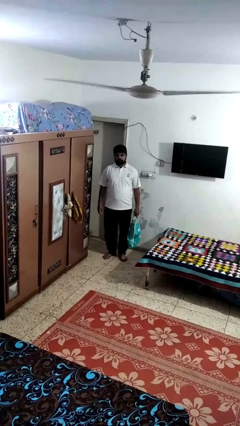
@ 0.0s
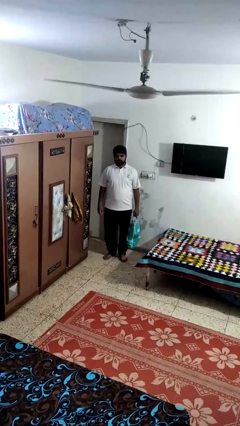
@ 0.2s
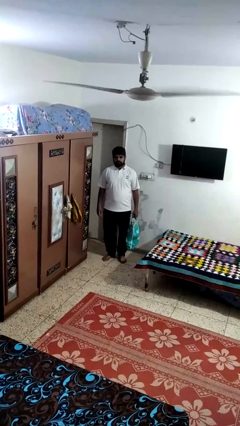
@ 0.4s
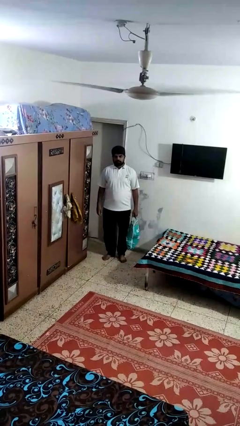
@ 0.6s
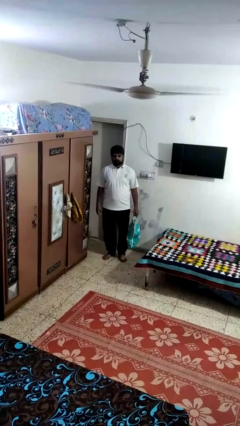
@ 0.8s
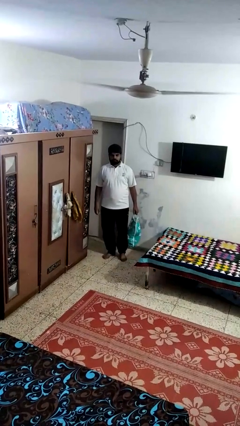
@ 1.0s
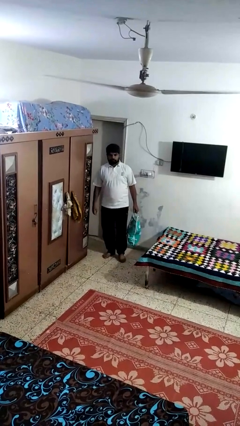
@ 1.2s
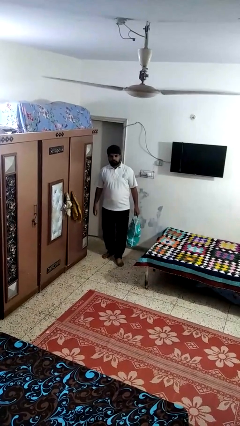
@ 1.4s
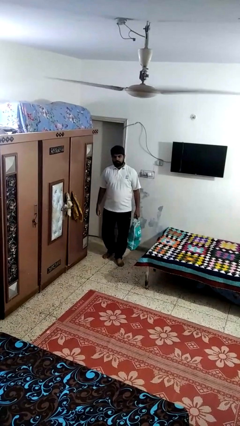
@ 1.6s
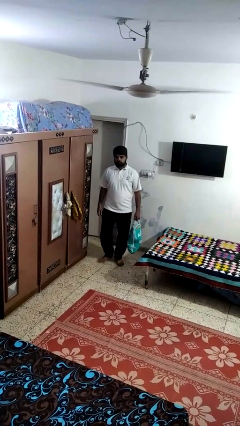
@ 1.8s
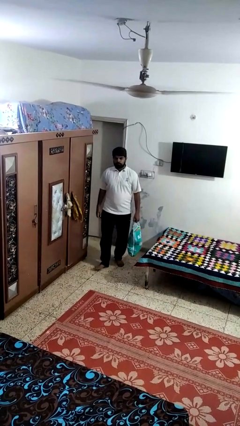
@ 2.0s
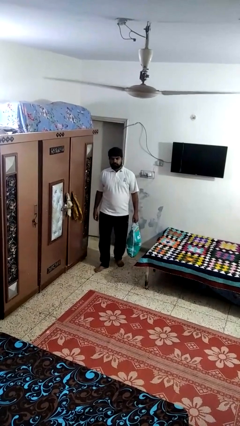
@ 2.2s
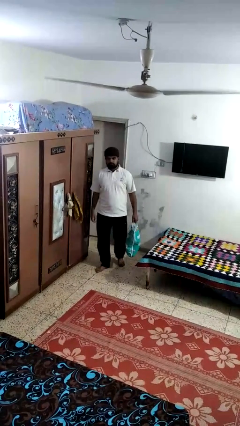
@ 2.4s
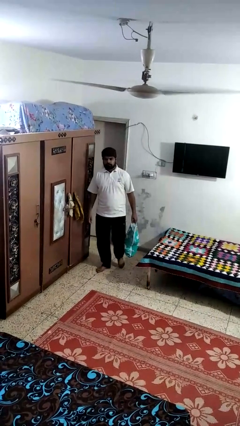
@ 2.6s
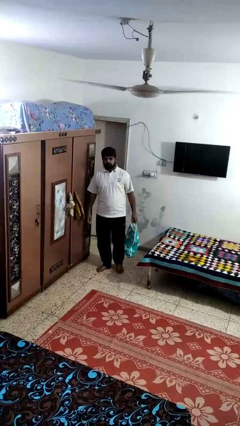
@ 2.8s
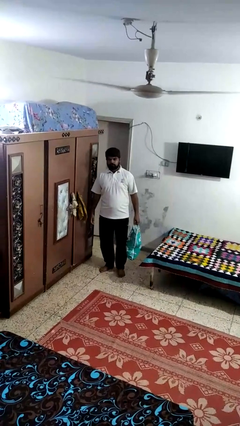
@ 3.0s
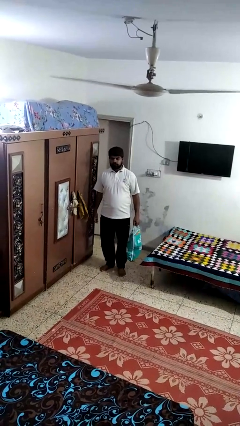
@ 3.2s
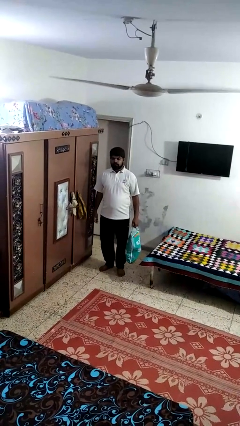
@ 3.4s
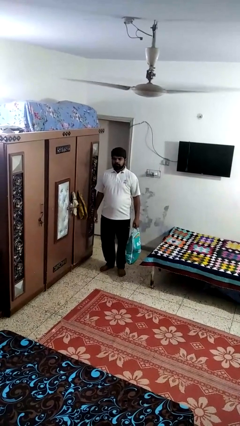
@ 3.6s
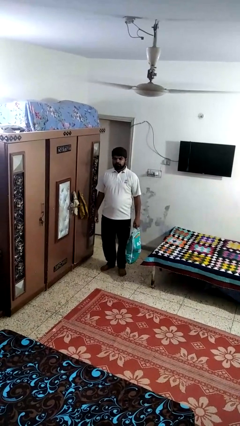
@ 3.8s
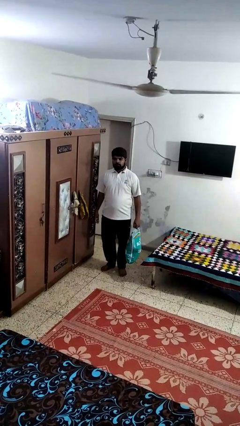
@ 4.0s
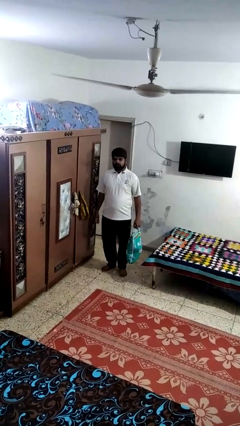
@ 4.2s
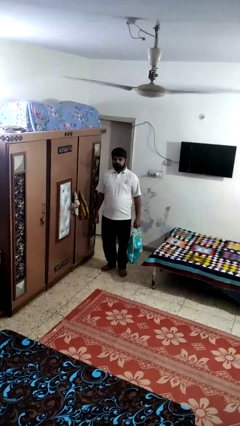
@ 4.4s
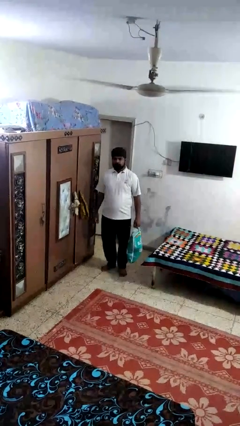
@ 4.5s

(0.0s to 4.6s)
person carries groceries

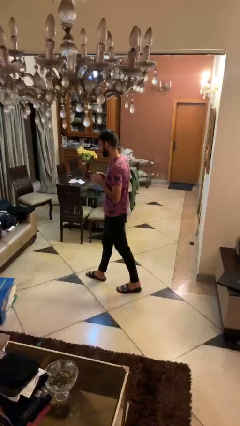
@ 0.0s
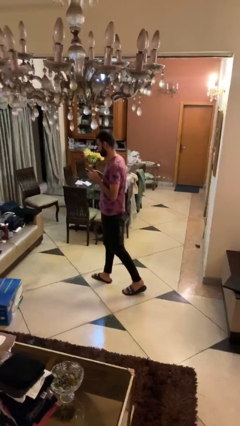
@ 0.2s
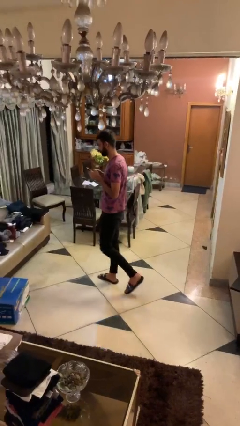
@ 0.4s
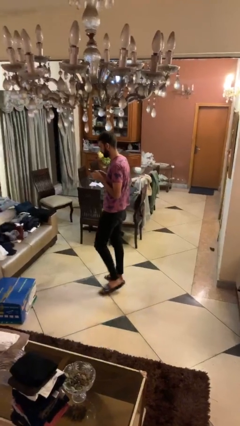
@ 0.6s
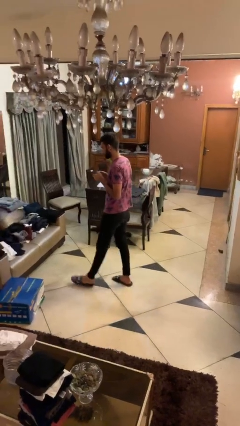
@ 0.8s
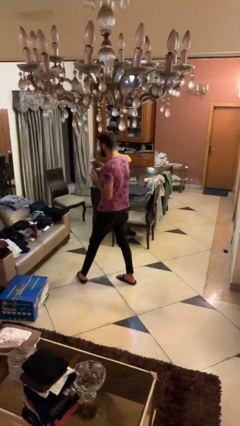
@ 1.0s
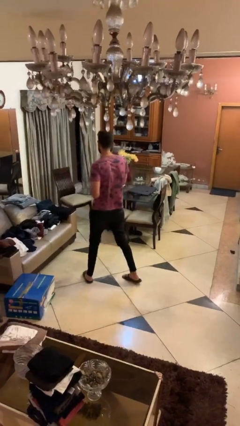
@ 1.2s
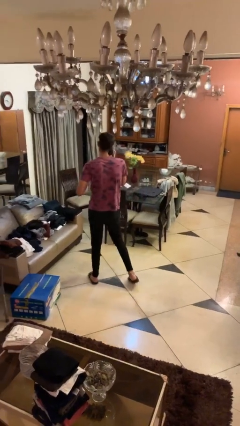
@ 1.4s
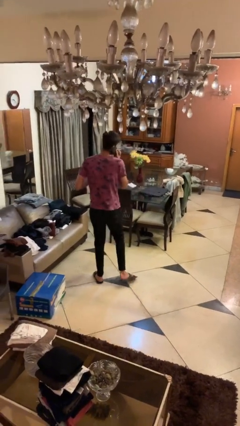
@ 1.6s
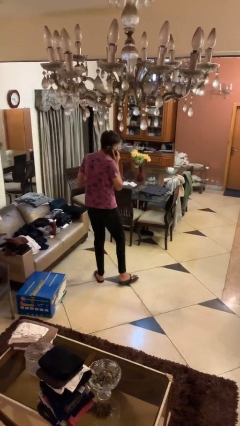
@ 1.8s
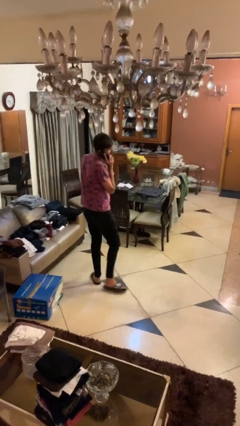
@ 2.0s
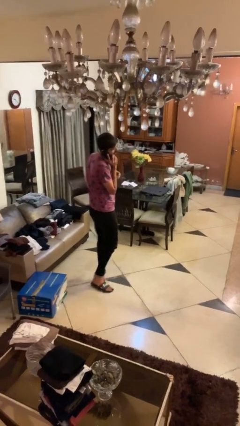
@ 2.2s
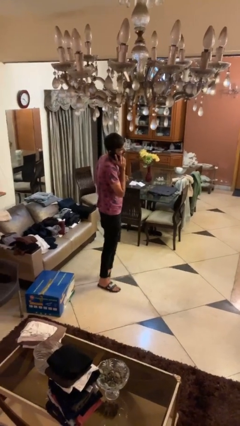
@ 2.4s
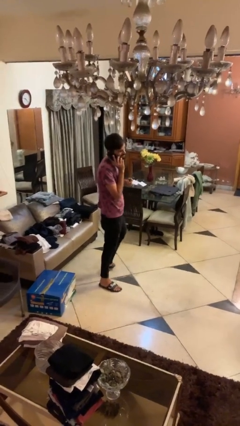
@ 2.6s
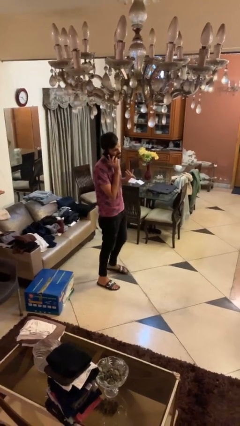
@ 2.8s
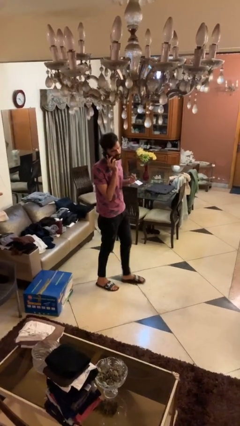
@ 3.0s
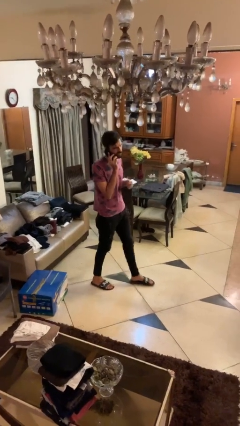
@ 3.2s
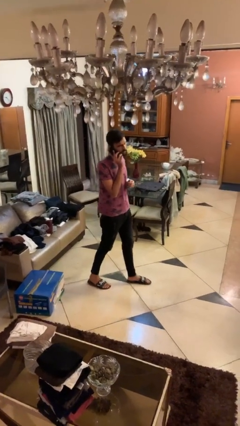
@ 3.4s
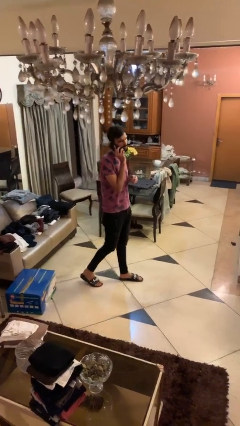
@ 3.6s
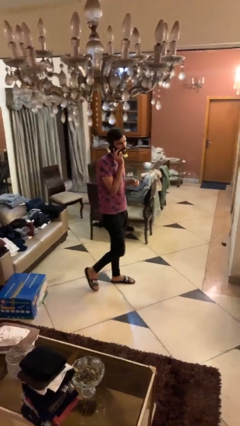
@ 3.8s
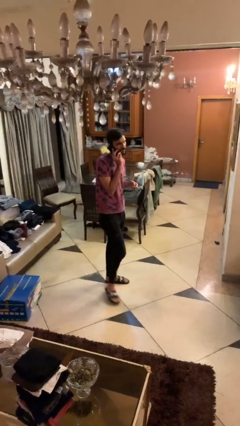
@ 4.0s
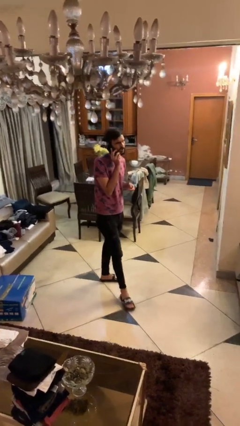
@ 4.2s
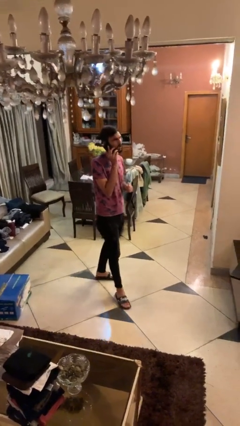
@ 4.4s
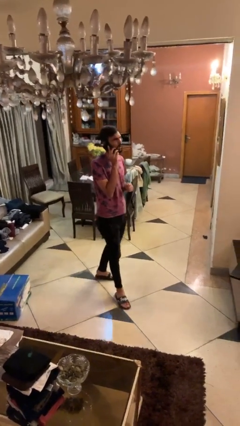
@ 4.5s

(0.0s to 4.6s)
person talks on phone

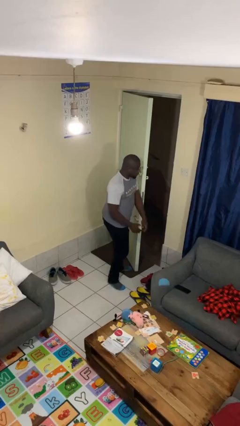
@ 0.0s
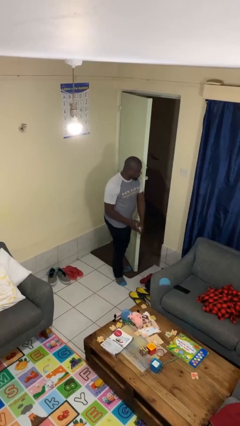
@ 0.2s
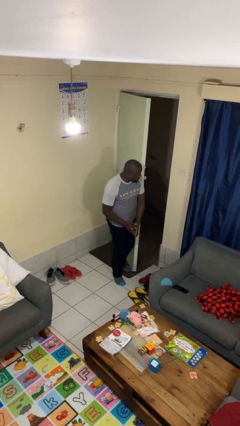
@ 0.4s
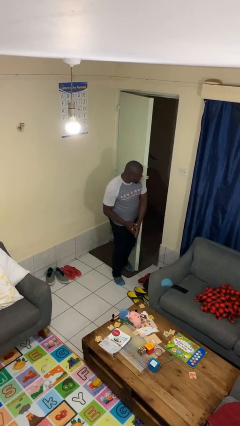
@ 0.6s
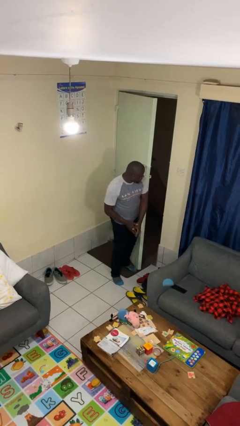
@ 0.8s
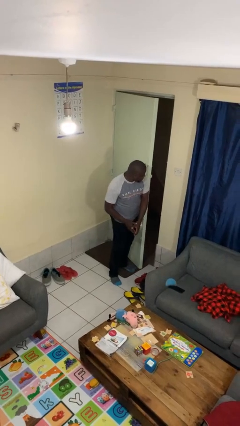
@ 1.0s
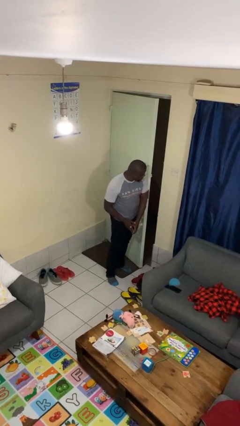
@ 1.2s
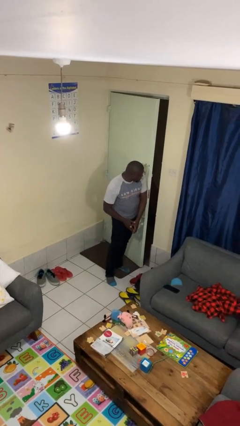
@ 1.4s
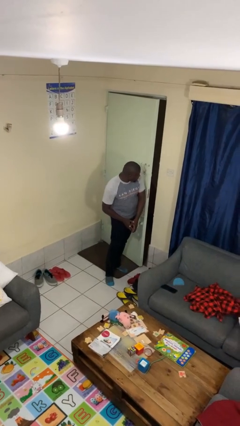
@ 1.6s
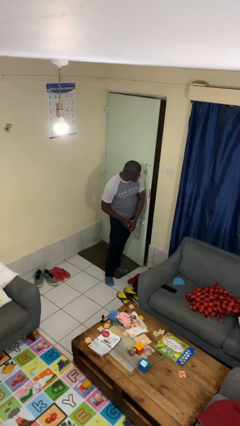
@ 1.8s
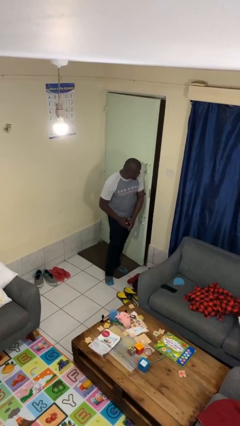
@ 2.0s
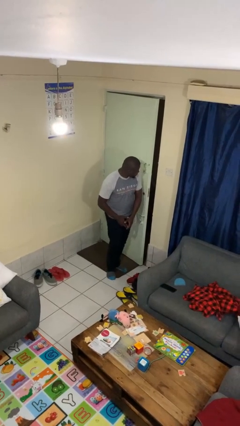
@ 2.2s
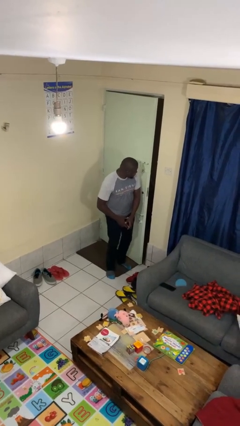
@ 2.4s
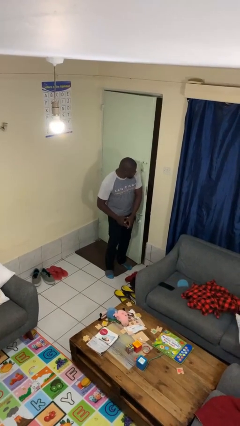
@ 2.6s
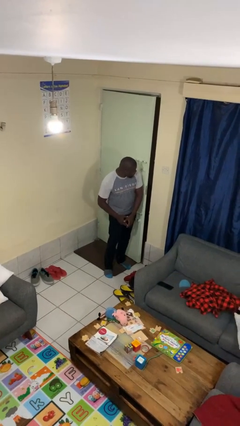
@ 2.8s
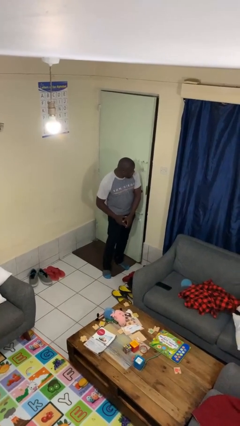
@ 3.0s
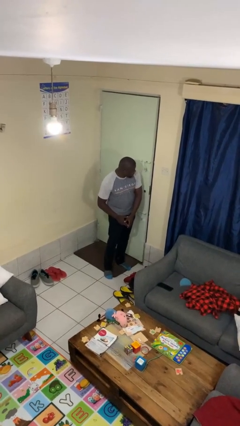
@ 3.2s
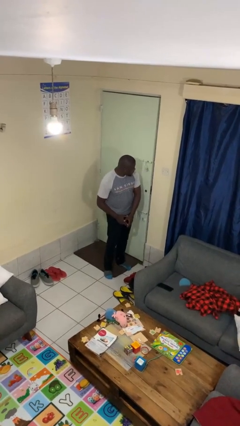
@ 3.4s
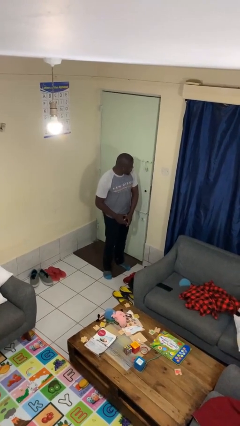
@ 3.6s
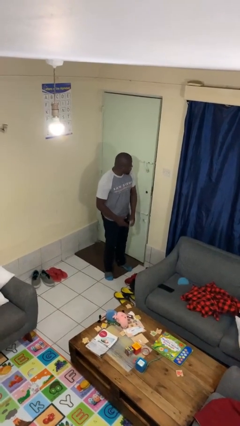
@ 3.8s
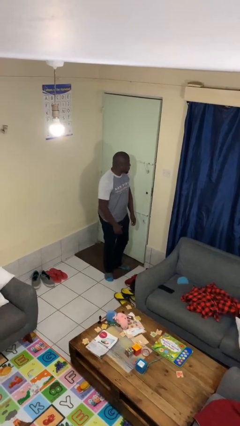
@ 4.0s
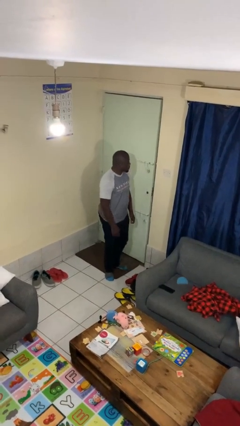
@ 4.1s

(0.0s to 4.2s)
person closes door with hip

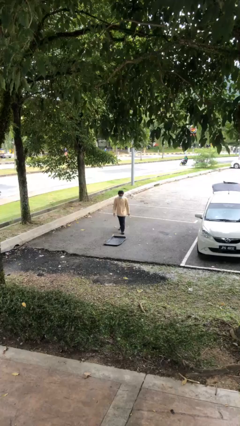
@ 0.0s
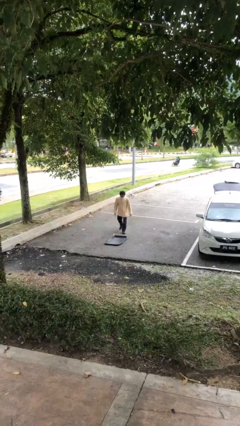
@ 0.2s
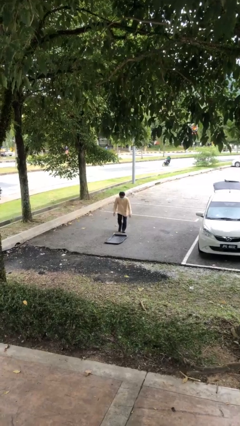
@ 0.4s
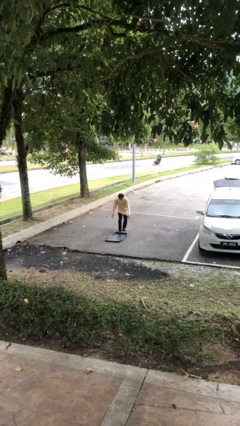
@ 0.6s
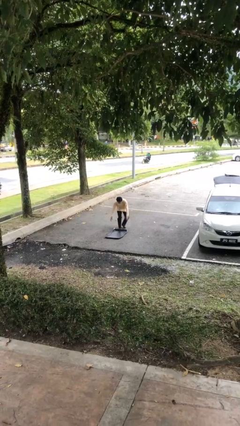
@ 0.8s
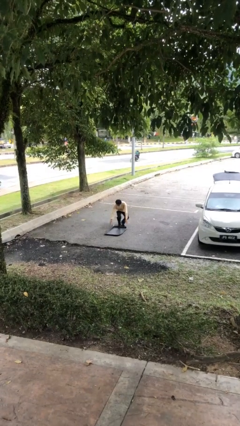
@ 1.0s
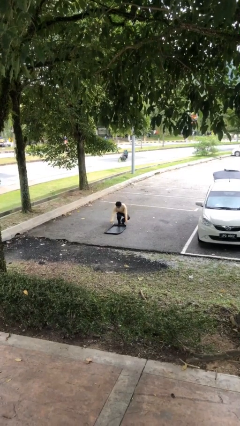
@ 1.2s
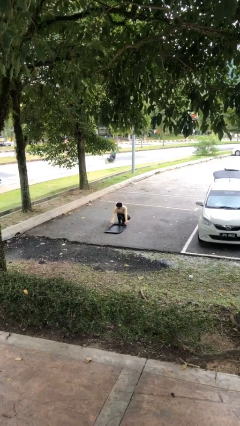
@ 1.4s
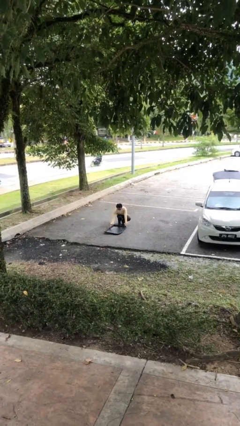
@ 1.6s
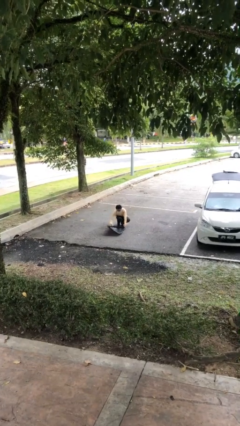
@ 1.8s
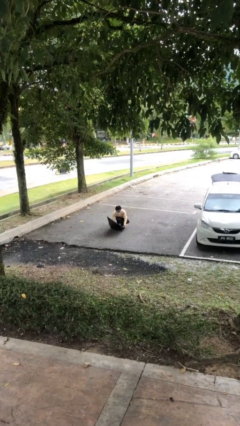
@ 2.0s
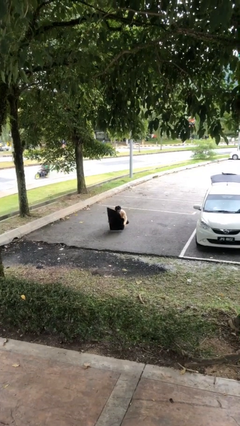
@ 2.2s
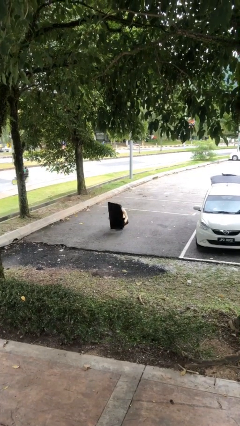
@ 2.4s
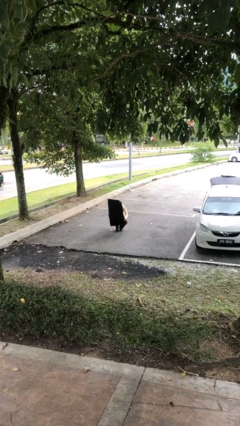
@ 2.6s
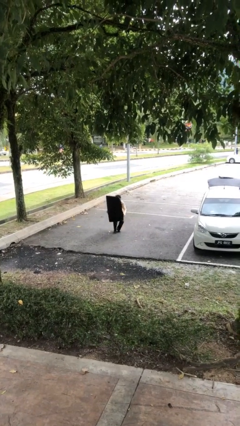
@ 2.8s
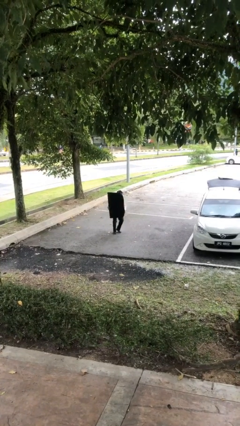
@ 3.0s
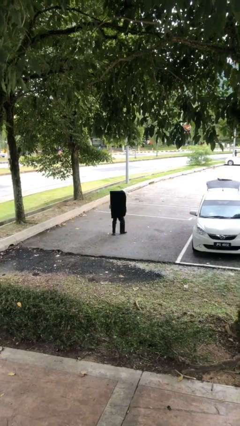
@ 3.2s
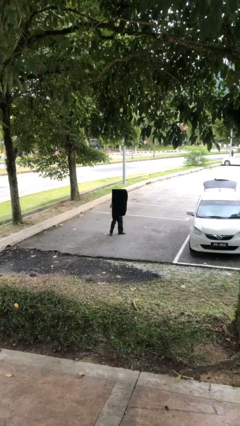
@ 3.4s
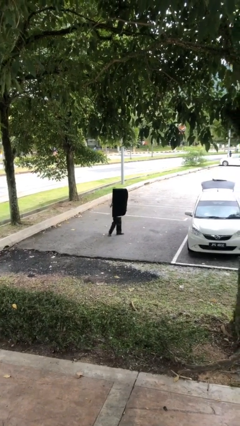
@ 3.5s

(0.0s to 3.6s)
person picks up object from floor

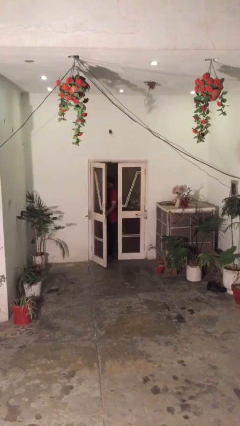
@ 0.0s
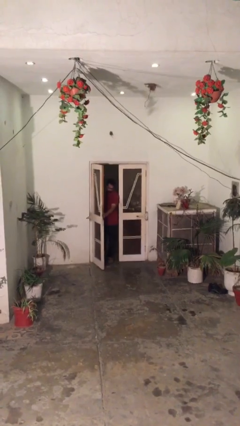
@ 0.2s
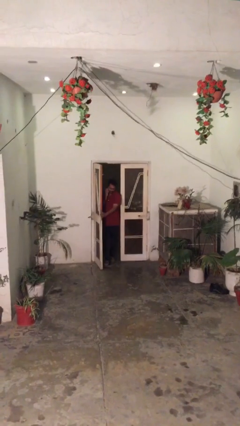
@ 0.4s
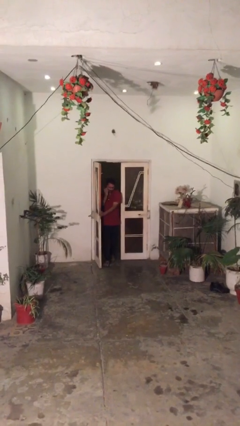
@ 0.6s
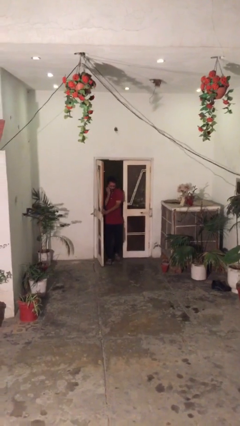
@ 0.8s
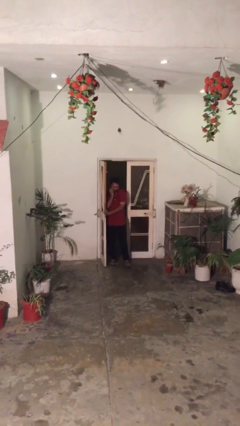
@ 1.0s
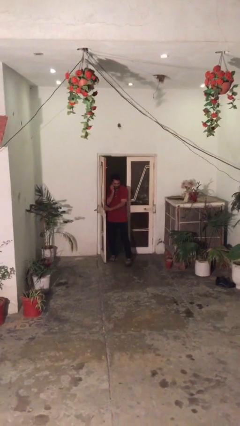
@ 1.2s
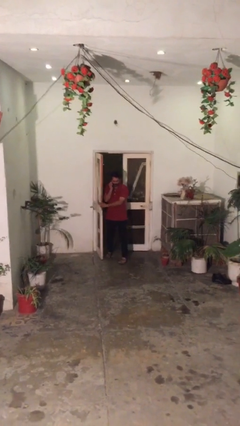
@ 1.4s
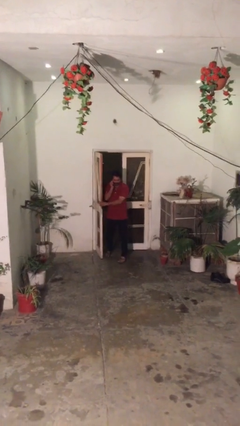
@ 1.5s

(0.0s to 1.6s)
person opens facility door
